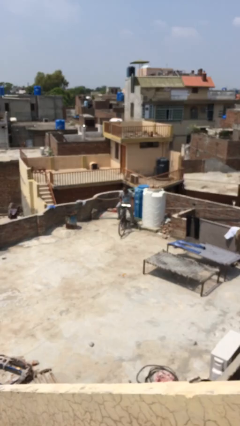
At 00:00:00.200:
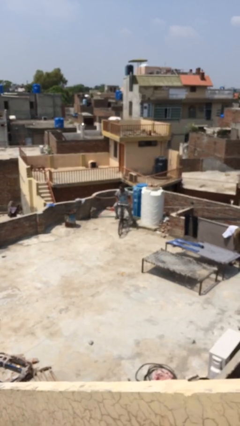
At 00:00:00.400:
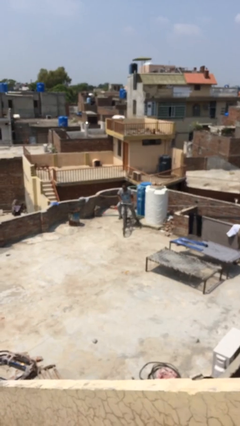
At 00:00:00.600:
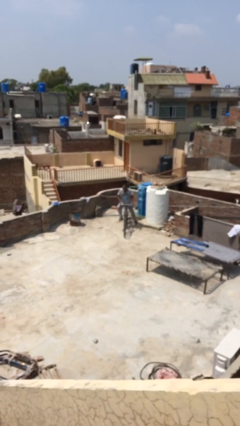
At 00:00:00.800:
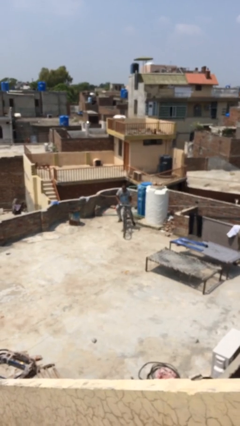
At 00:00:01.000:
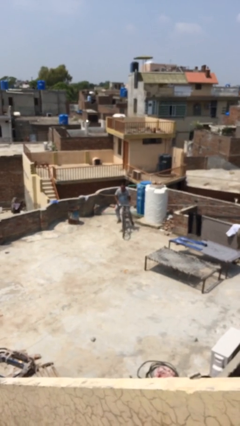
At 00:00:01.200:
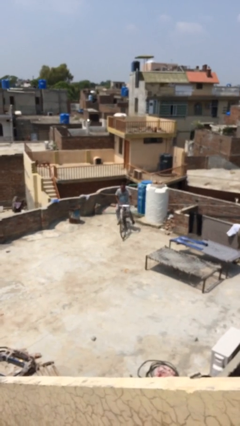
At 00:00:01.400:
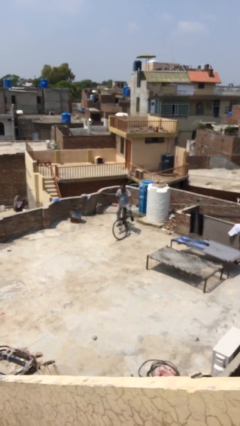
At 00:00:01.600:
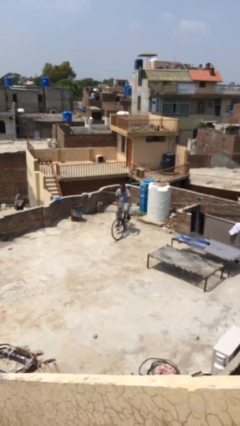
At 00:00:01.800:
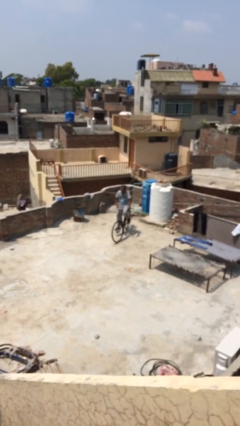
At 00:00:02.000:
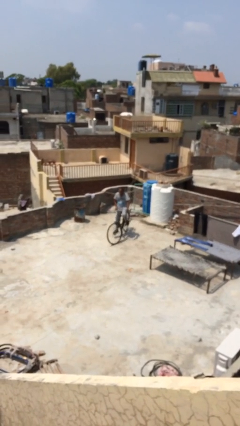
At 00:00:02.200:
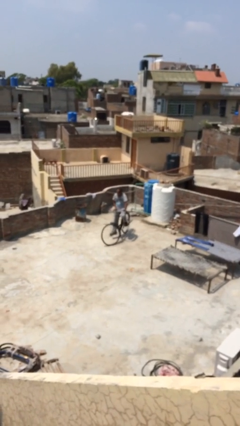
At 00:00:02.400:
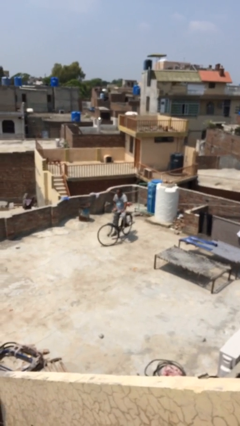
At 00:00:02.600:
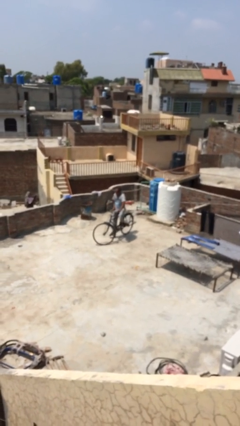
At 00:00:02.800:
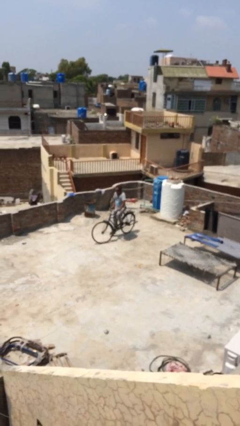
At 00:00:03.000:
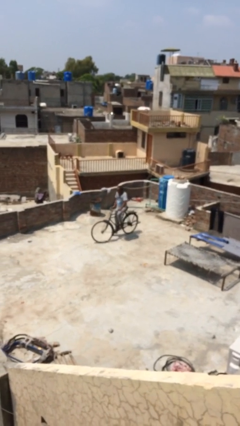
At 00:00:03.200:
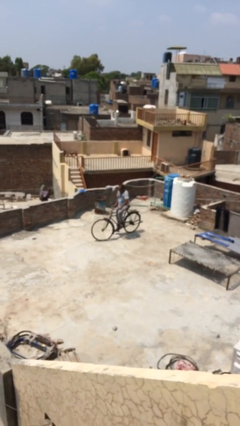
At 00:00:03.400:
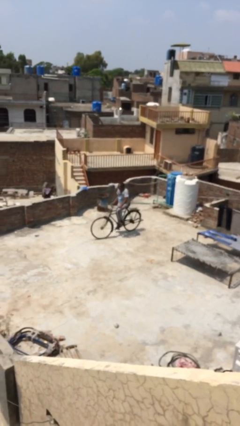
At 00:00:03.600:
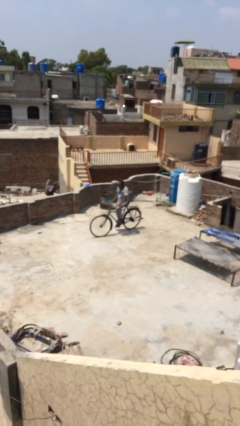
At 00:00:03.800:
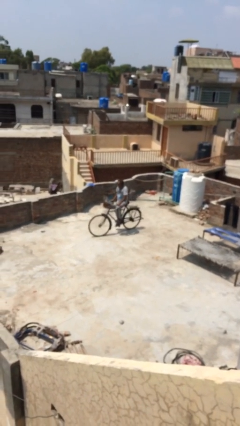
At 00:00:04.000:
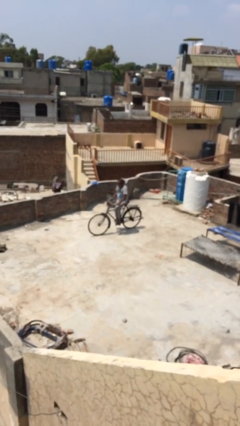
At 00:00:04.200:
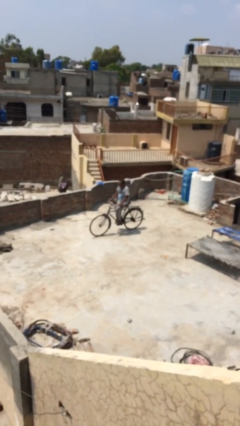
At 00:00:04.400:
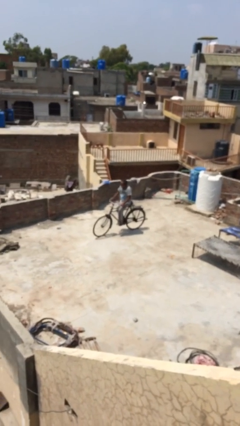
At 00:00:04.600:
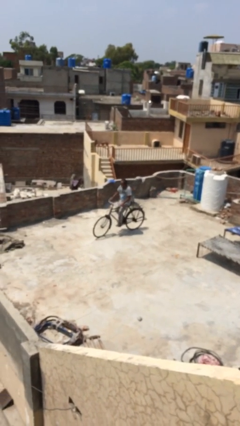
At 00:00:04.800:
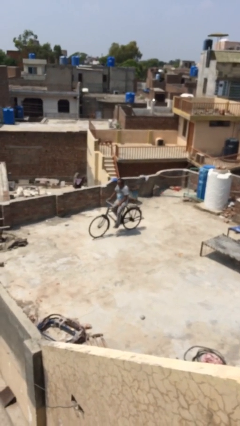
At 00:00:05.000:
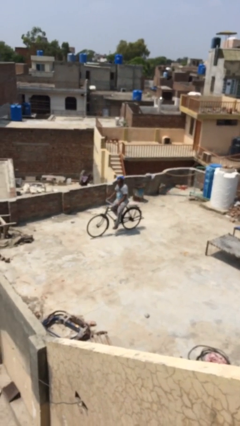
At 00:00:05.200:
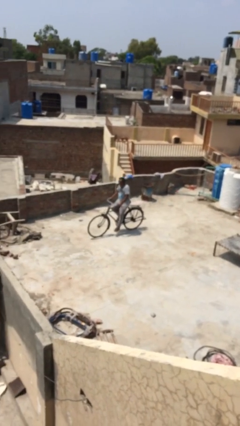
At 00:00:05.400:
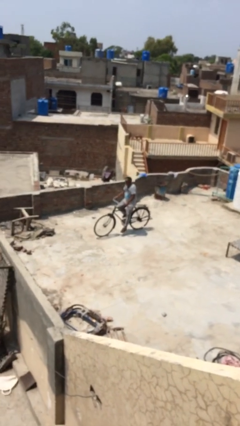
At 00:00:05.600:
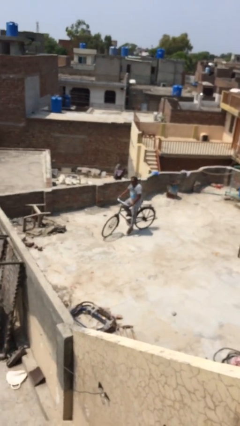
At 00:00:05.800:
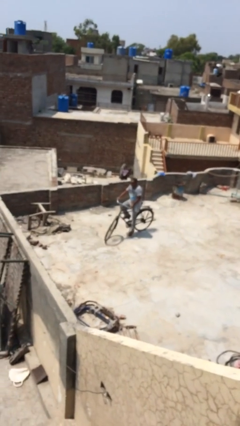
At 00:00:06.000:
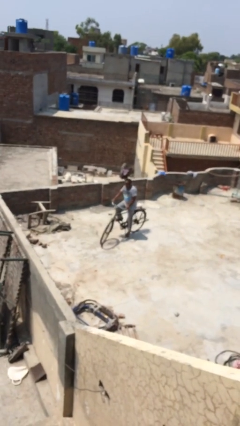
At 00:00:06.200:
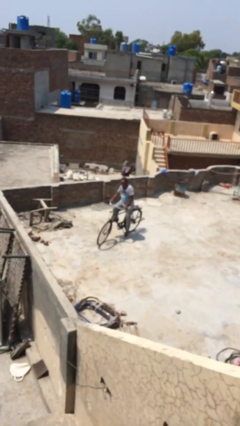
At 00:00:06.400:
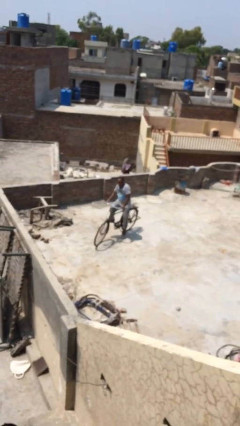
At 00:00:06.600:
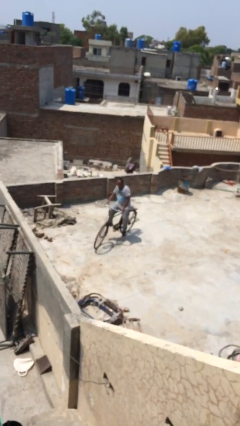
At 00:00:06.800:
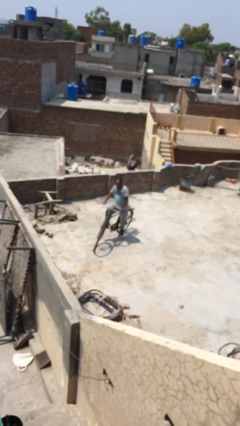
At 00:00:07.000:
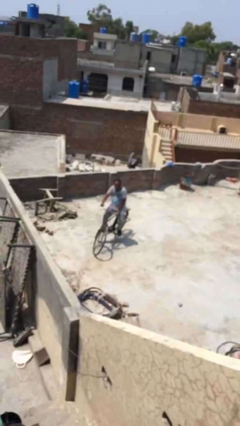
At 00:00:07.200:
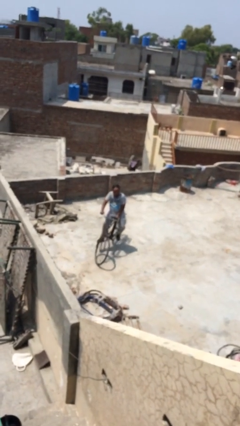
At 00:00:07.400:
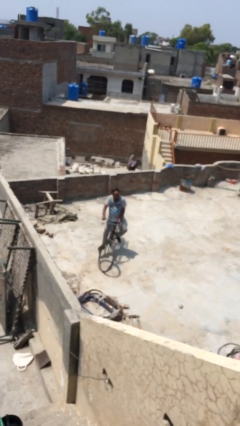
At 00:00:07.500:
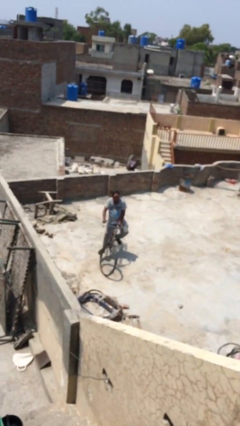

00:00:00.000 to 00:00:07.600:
person rides bicycle

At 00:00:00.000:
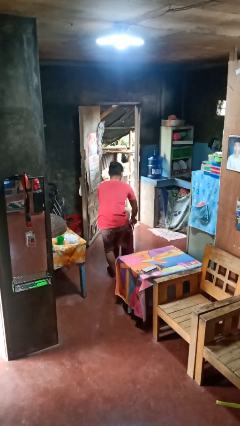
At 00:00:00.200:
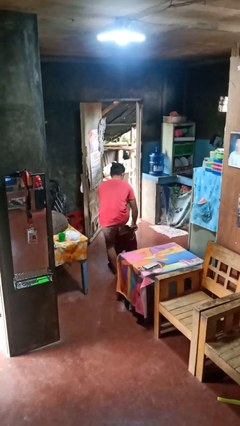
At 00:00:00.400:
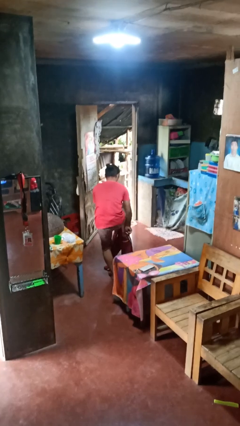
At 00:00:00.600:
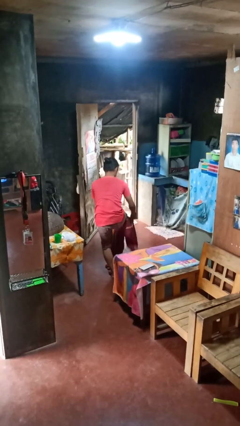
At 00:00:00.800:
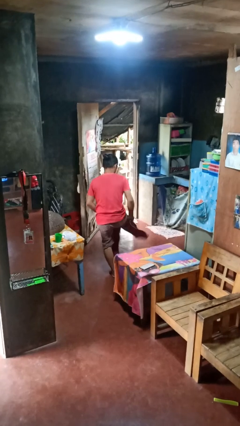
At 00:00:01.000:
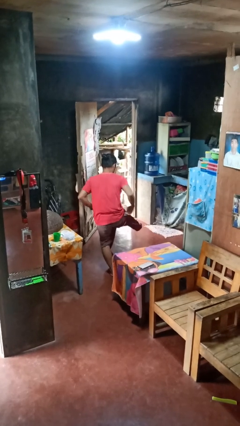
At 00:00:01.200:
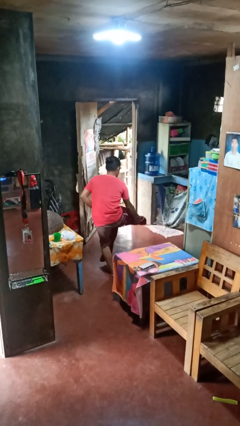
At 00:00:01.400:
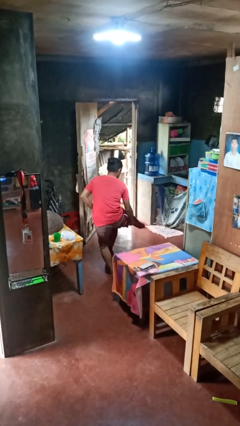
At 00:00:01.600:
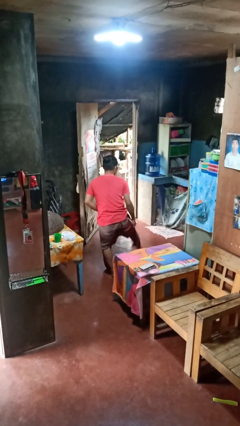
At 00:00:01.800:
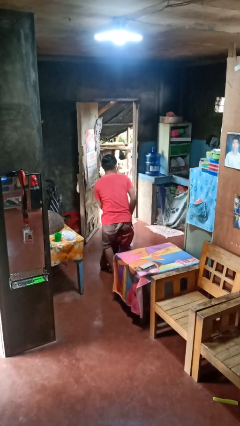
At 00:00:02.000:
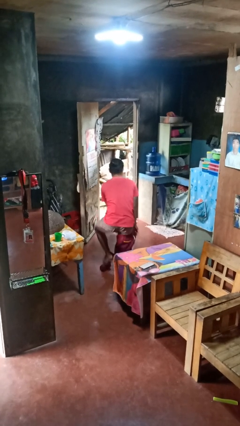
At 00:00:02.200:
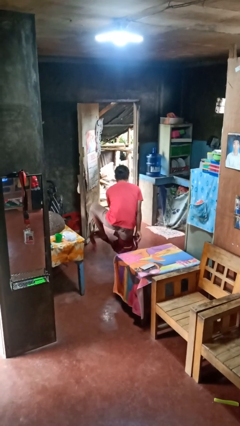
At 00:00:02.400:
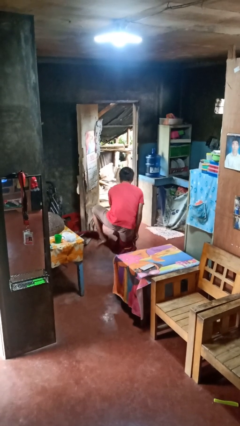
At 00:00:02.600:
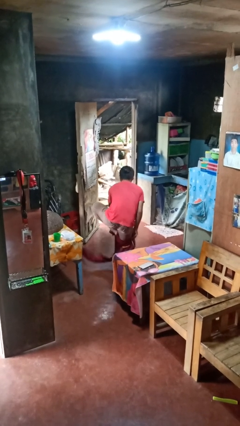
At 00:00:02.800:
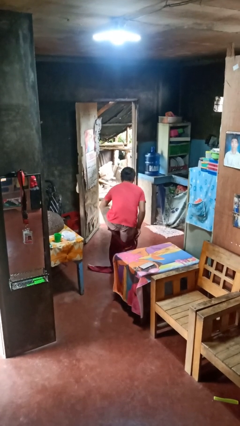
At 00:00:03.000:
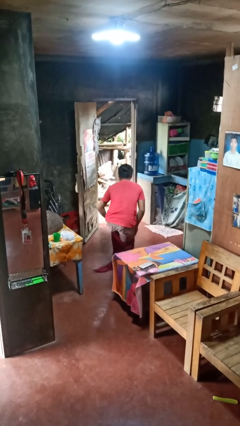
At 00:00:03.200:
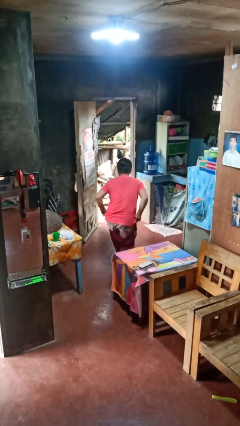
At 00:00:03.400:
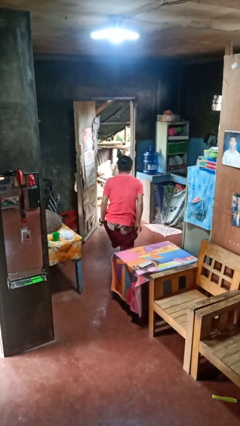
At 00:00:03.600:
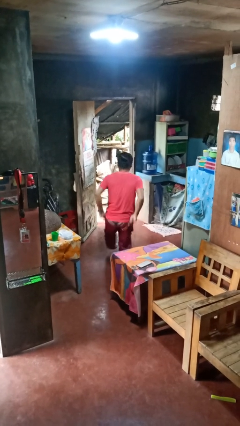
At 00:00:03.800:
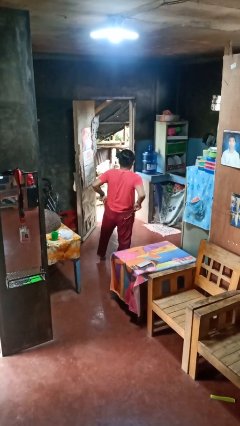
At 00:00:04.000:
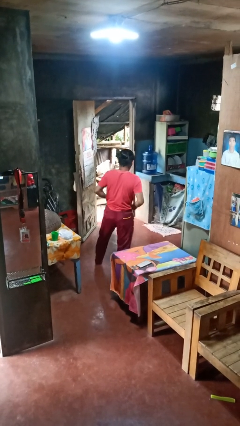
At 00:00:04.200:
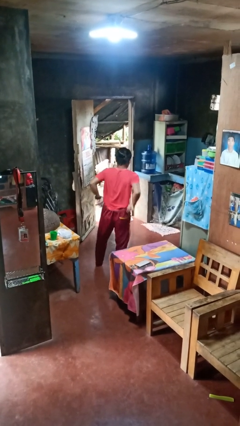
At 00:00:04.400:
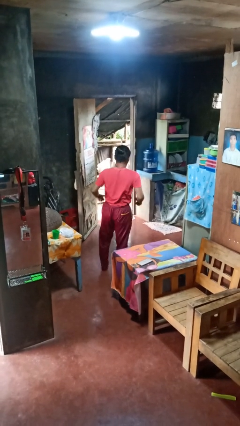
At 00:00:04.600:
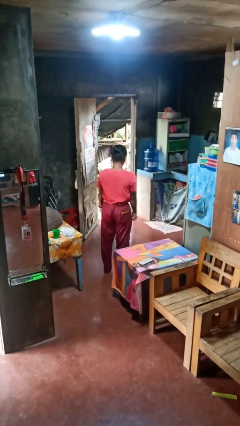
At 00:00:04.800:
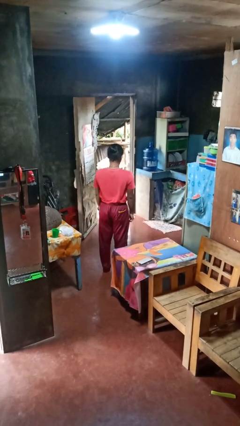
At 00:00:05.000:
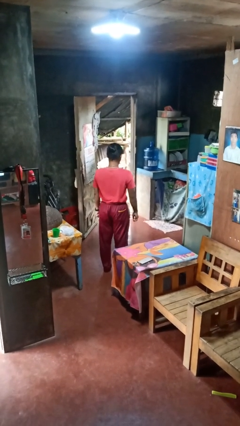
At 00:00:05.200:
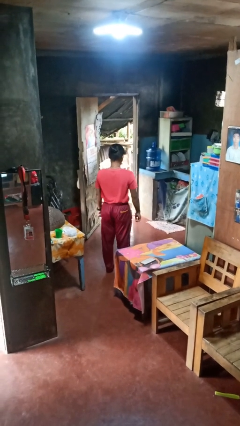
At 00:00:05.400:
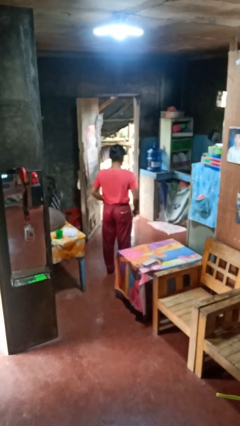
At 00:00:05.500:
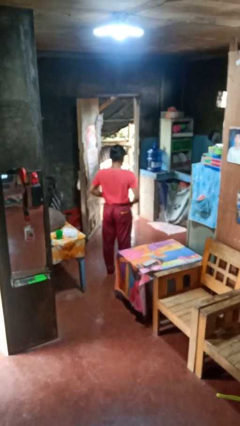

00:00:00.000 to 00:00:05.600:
person puts on pants

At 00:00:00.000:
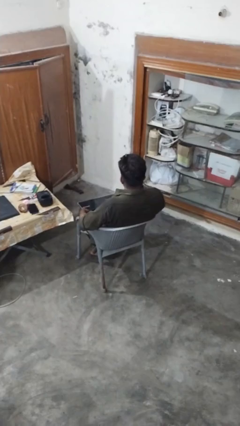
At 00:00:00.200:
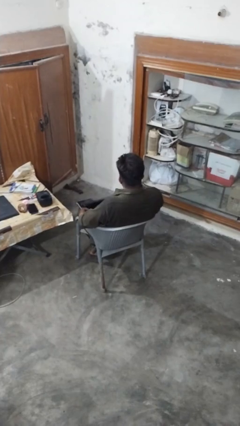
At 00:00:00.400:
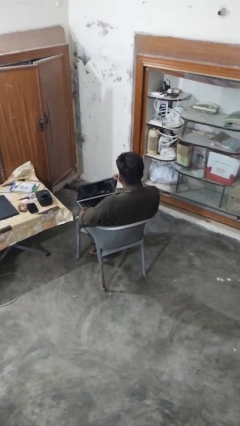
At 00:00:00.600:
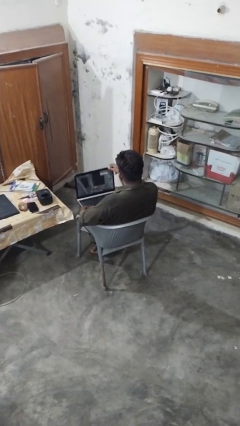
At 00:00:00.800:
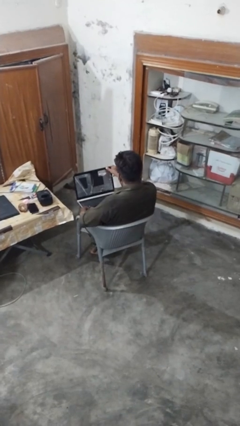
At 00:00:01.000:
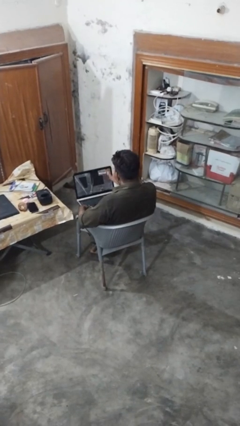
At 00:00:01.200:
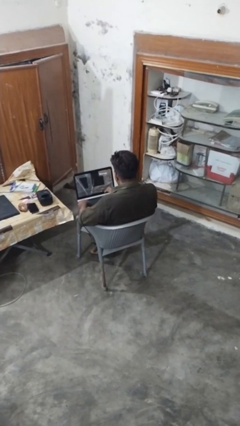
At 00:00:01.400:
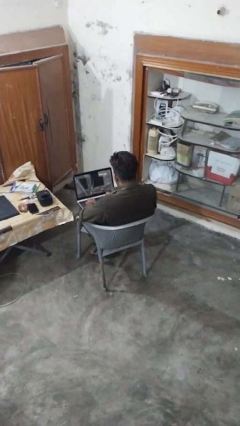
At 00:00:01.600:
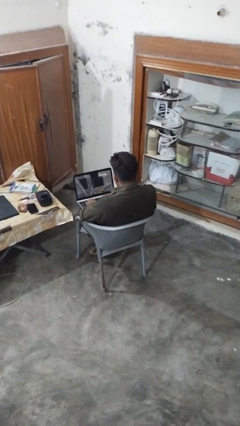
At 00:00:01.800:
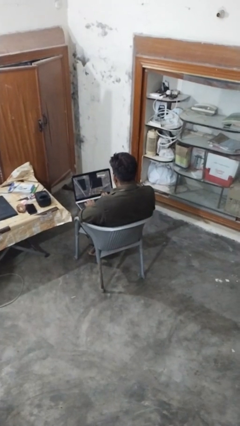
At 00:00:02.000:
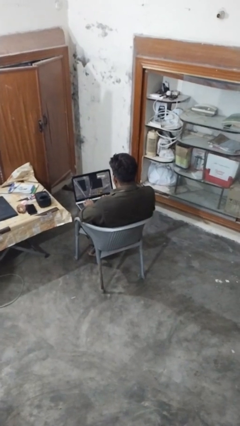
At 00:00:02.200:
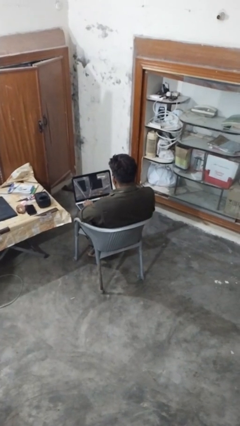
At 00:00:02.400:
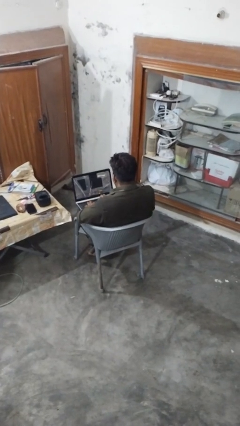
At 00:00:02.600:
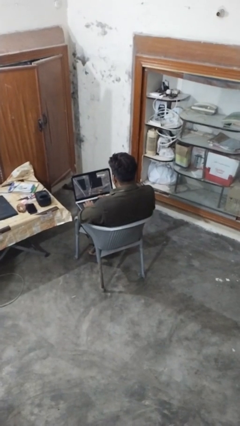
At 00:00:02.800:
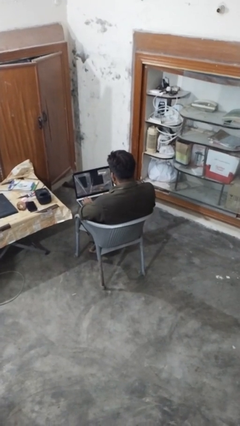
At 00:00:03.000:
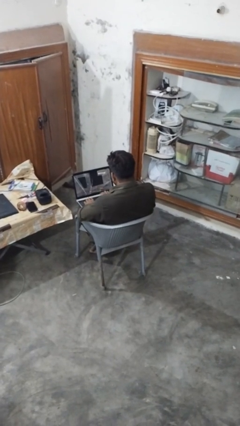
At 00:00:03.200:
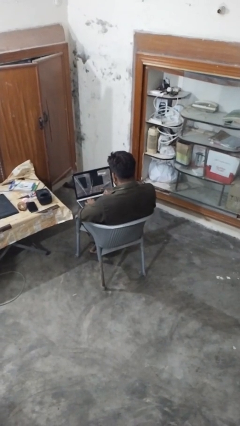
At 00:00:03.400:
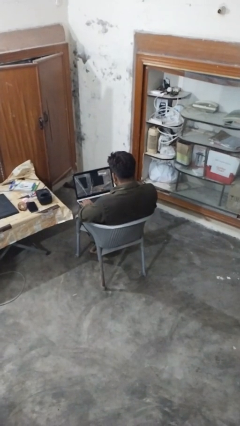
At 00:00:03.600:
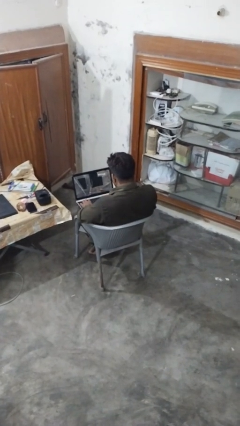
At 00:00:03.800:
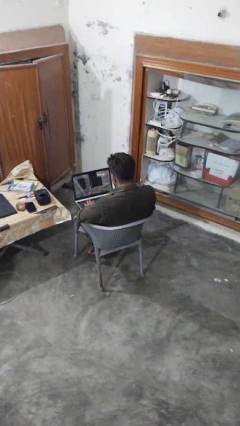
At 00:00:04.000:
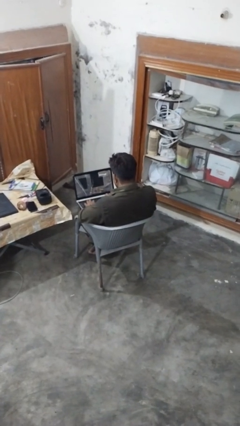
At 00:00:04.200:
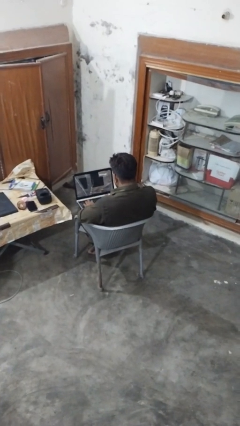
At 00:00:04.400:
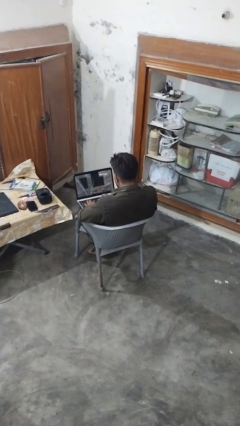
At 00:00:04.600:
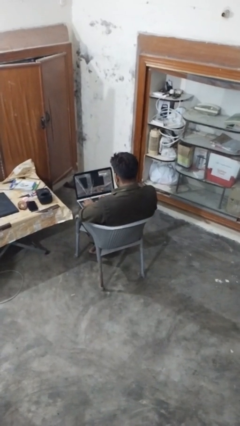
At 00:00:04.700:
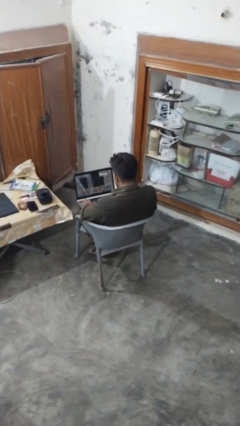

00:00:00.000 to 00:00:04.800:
person opens laptop
